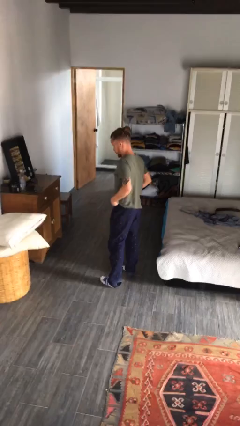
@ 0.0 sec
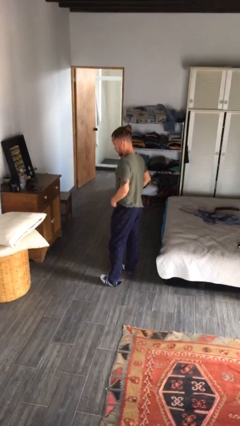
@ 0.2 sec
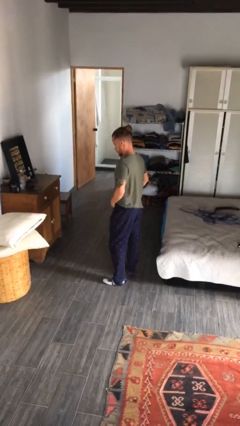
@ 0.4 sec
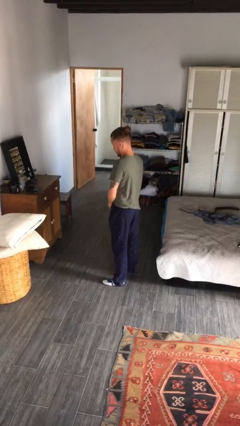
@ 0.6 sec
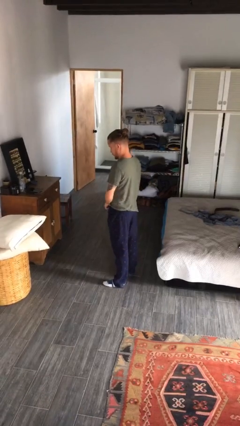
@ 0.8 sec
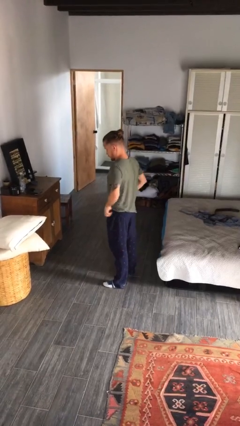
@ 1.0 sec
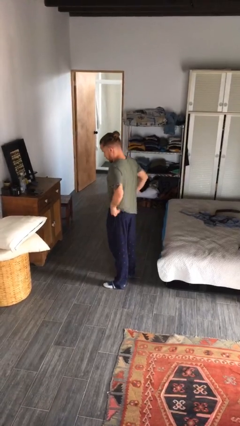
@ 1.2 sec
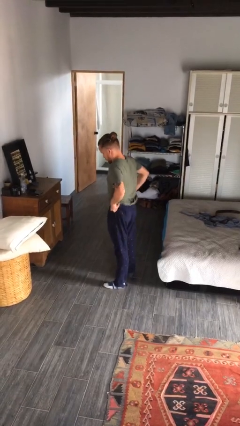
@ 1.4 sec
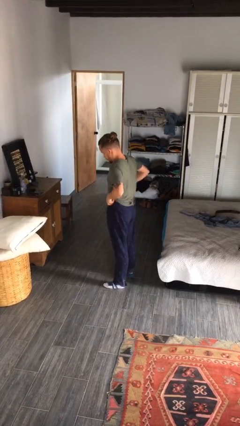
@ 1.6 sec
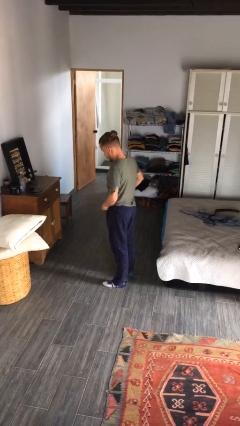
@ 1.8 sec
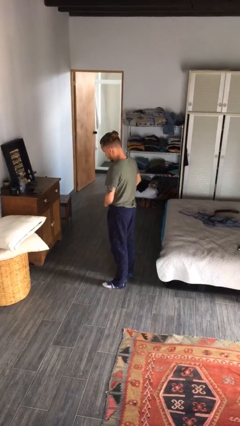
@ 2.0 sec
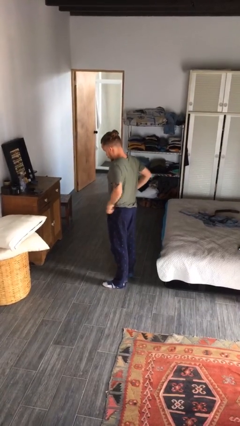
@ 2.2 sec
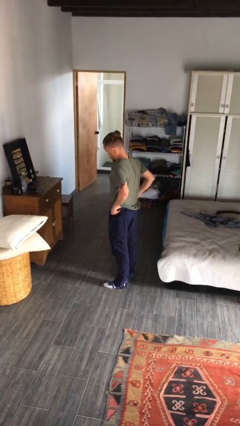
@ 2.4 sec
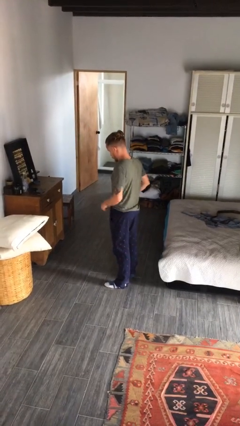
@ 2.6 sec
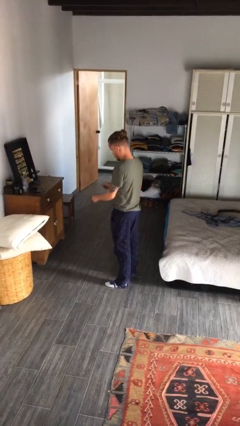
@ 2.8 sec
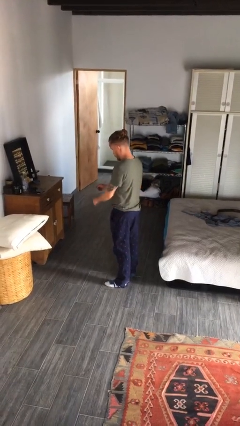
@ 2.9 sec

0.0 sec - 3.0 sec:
person hikes up pants

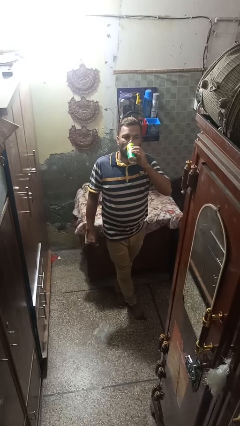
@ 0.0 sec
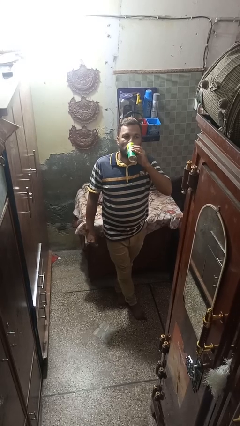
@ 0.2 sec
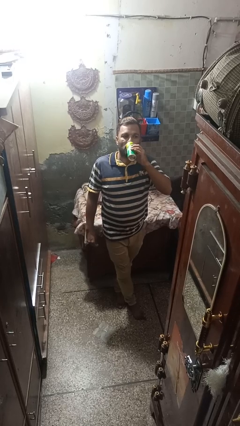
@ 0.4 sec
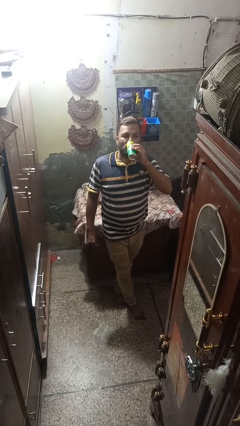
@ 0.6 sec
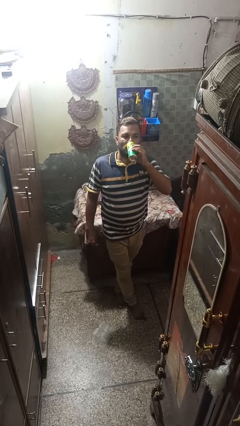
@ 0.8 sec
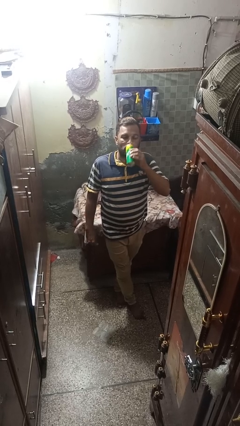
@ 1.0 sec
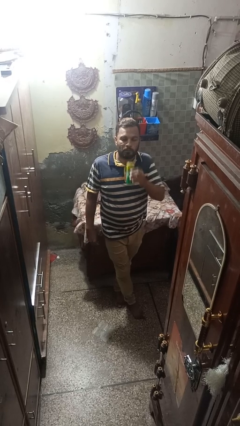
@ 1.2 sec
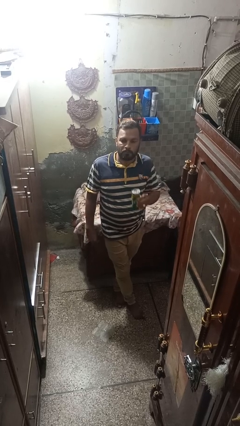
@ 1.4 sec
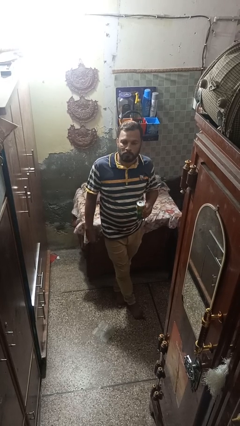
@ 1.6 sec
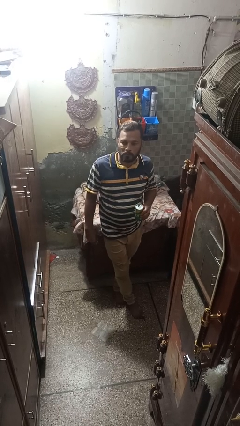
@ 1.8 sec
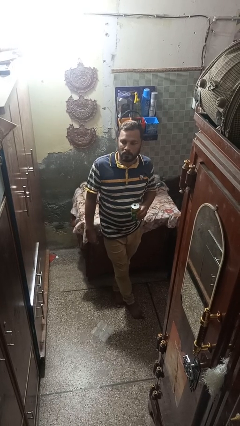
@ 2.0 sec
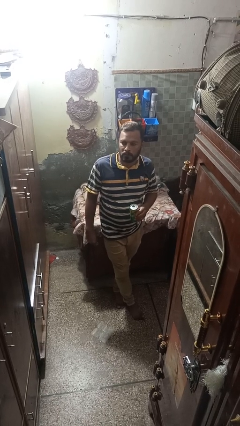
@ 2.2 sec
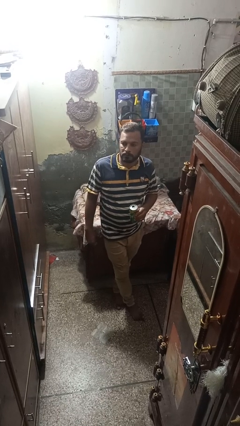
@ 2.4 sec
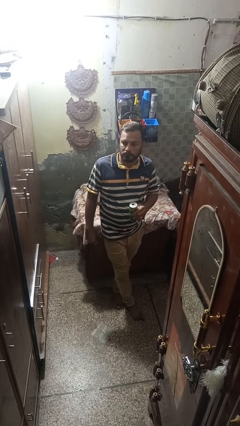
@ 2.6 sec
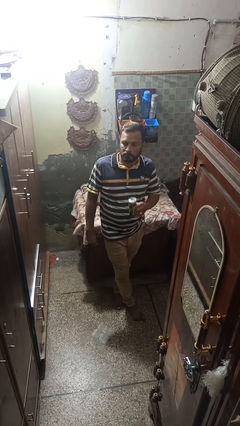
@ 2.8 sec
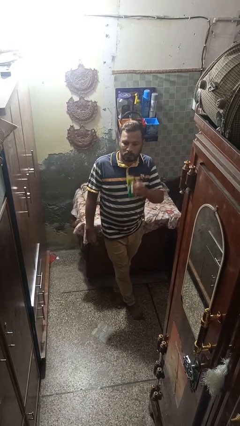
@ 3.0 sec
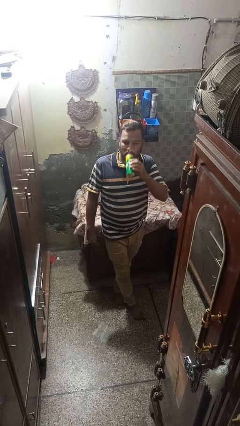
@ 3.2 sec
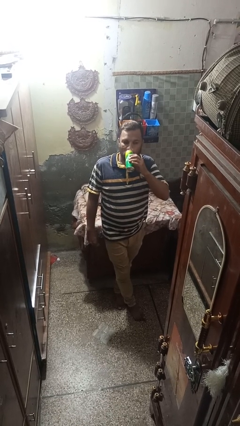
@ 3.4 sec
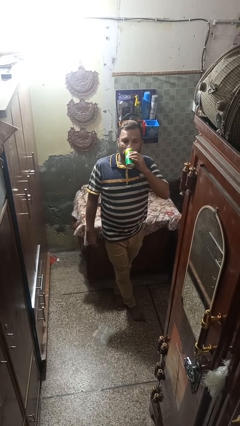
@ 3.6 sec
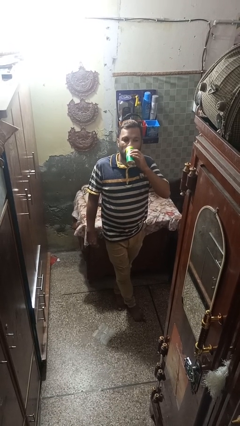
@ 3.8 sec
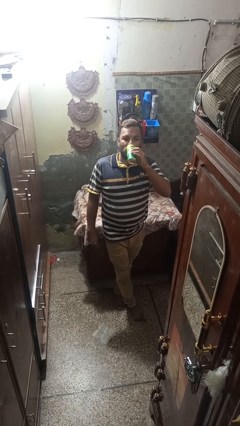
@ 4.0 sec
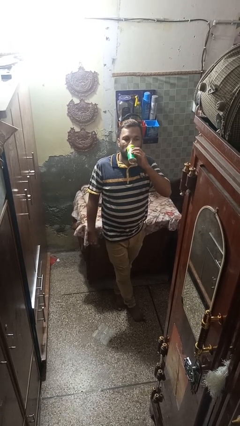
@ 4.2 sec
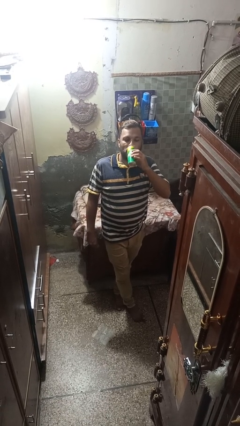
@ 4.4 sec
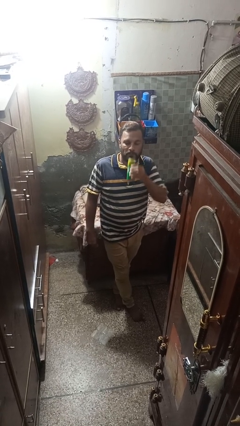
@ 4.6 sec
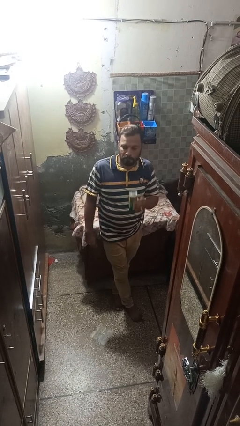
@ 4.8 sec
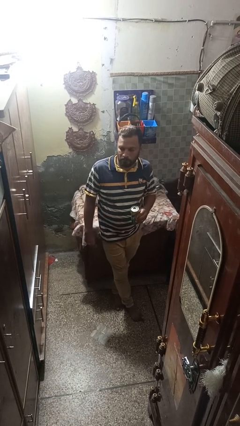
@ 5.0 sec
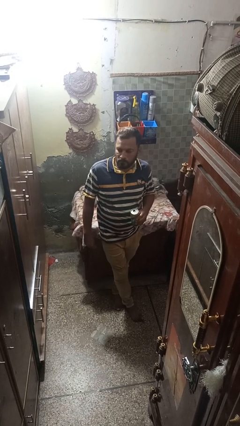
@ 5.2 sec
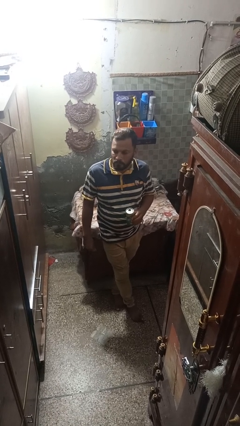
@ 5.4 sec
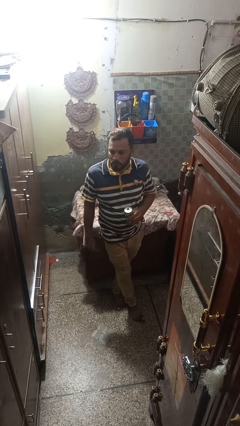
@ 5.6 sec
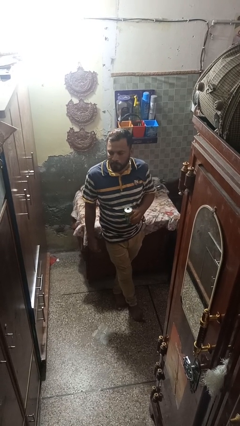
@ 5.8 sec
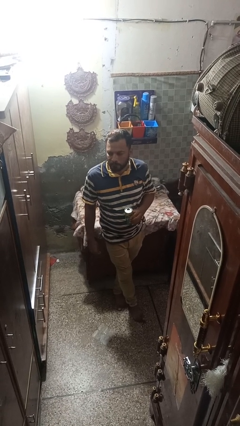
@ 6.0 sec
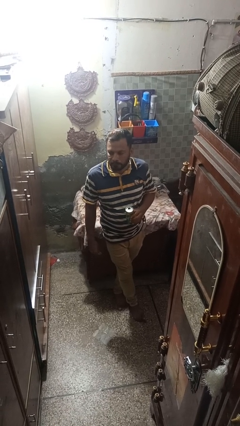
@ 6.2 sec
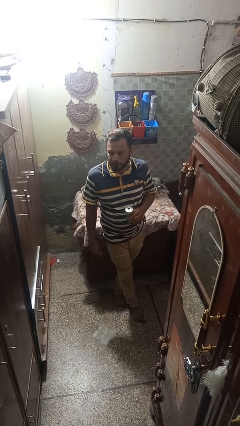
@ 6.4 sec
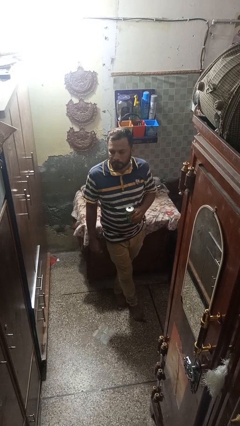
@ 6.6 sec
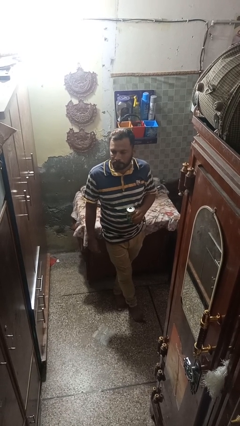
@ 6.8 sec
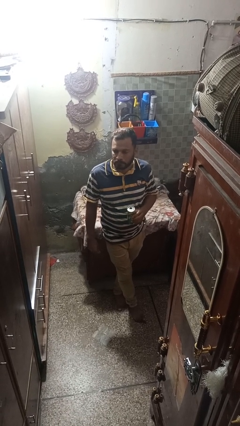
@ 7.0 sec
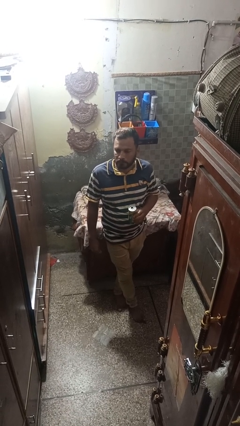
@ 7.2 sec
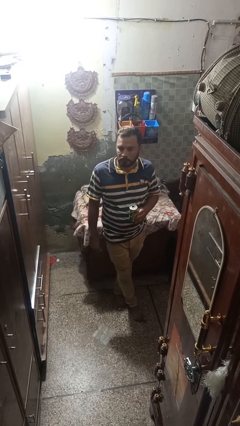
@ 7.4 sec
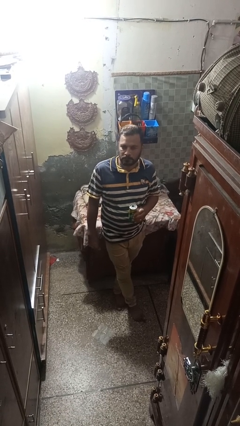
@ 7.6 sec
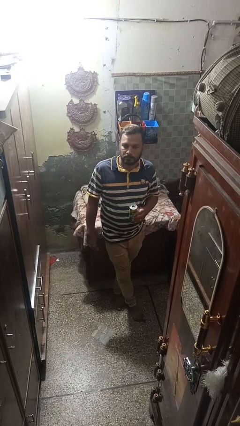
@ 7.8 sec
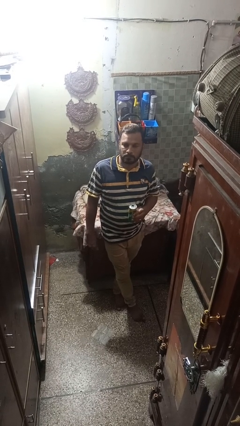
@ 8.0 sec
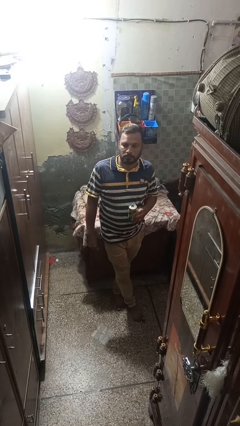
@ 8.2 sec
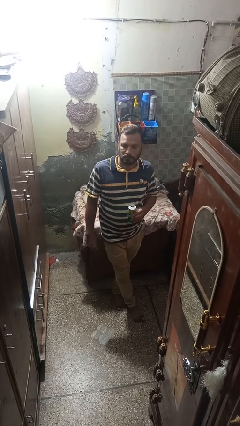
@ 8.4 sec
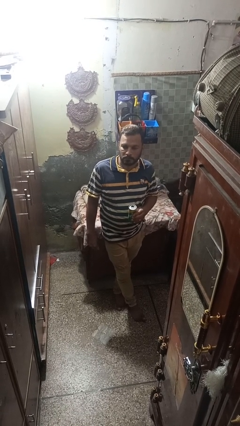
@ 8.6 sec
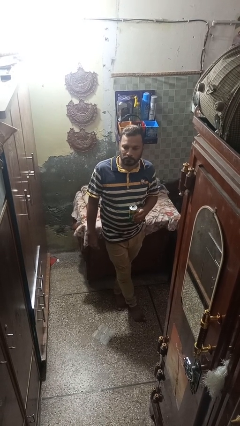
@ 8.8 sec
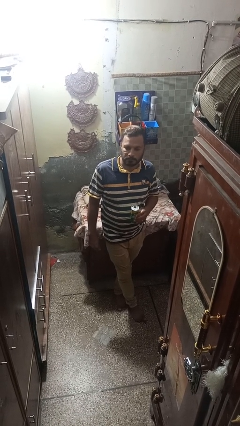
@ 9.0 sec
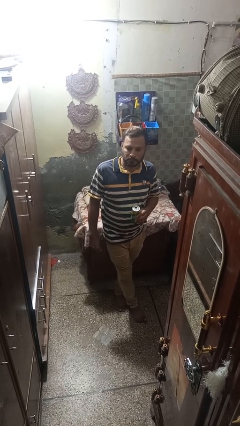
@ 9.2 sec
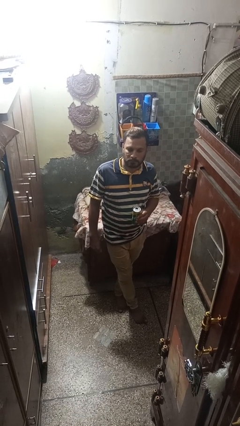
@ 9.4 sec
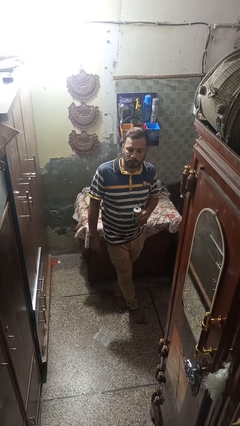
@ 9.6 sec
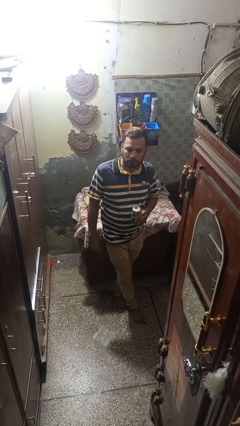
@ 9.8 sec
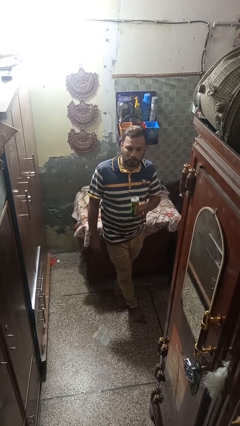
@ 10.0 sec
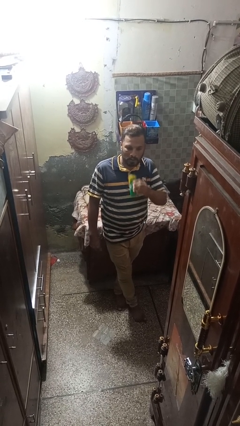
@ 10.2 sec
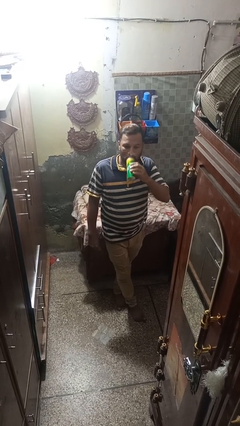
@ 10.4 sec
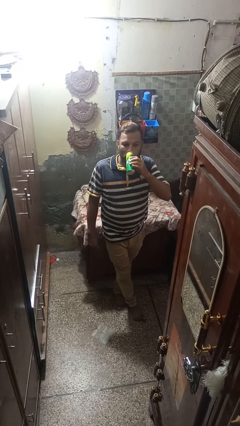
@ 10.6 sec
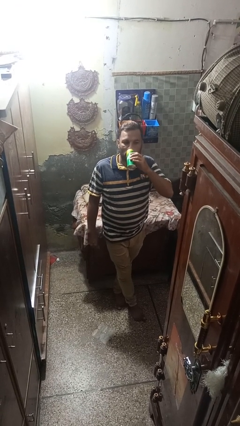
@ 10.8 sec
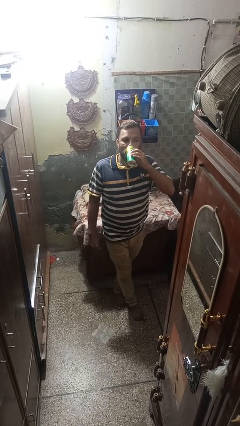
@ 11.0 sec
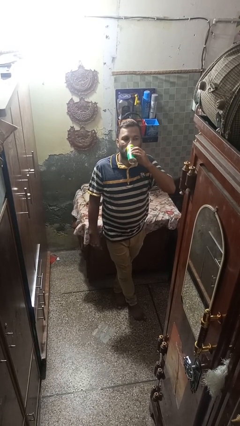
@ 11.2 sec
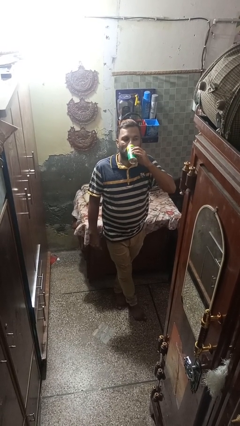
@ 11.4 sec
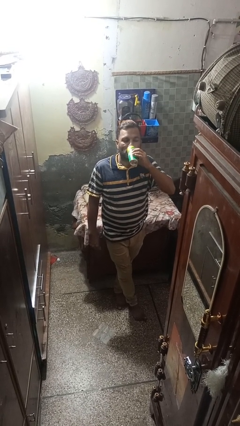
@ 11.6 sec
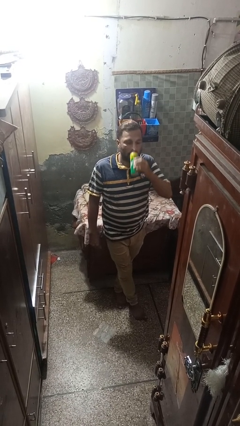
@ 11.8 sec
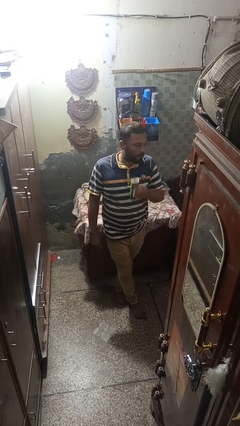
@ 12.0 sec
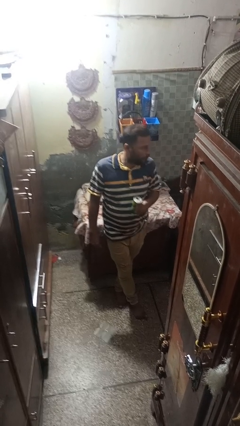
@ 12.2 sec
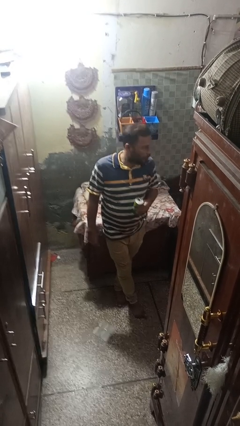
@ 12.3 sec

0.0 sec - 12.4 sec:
person drinks from beverage can

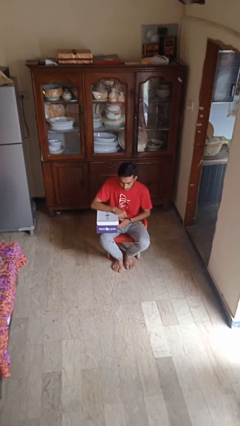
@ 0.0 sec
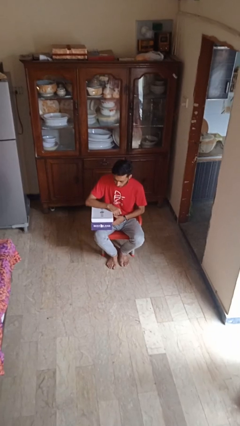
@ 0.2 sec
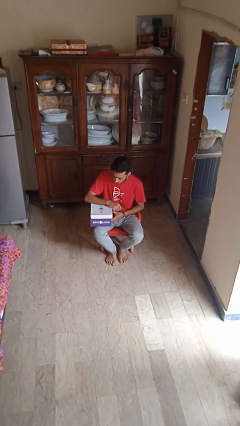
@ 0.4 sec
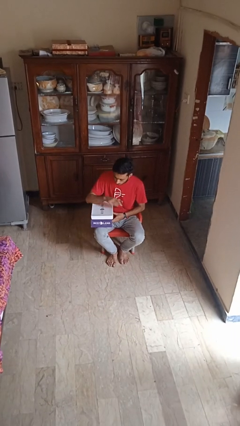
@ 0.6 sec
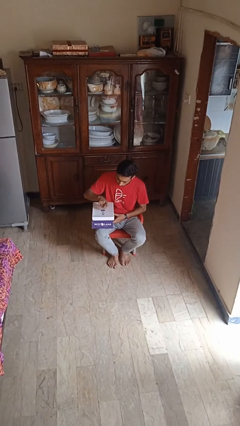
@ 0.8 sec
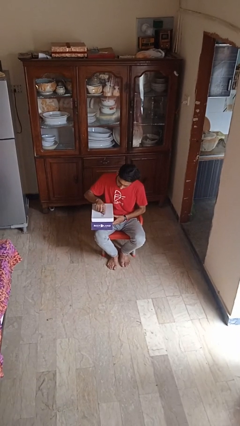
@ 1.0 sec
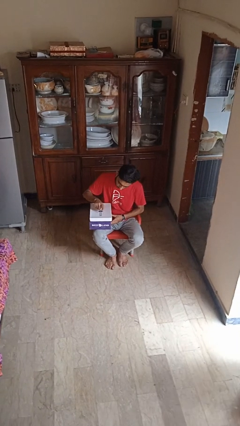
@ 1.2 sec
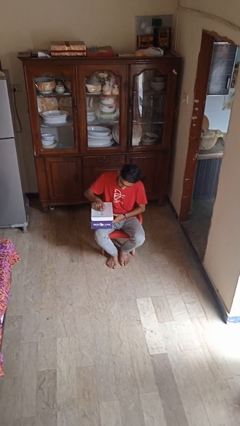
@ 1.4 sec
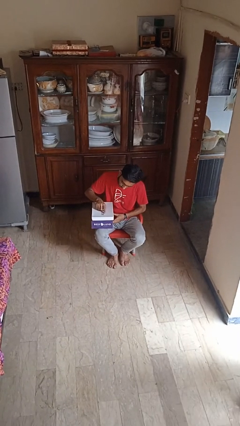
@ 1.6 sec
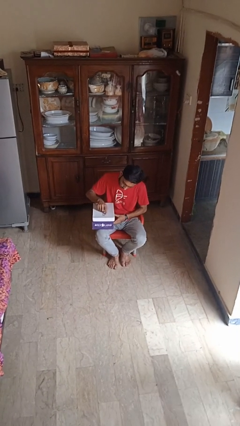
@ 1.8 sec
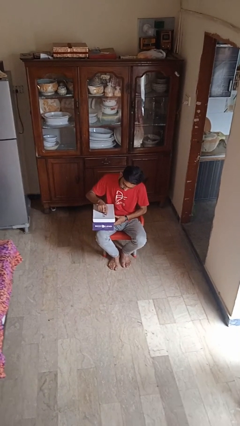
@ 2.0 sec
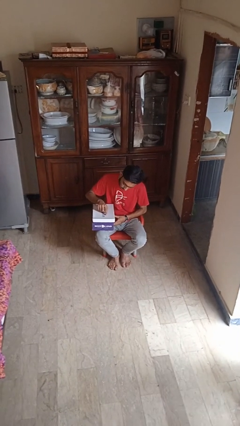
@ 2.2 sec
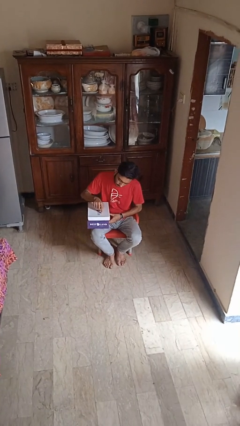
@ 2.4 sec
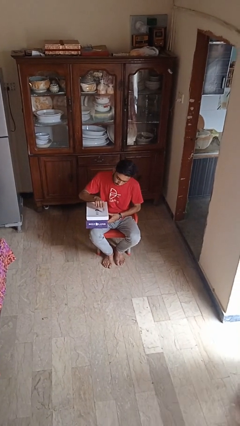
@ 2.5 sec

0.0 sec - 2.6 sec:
person taps object with finger
